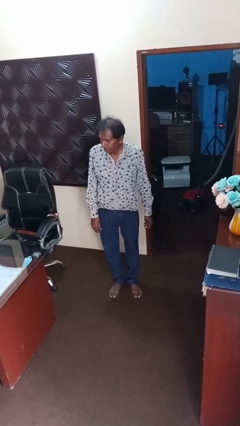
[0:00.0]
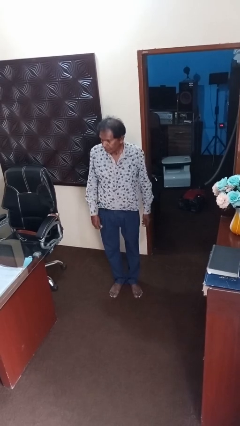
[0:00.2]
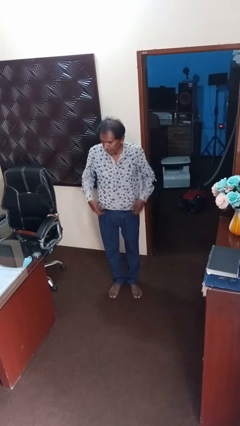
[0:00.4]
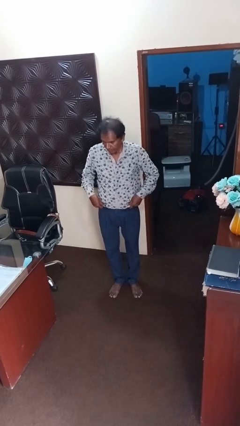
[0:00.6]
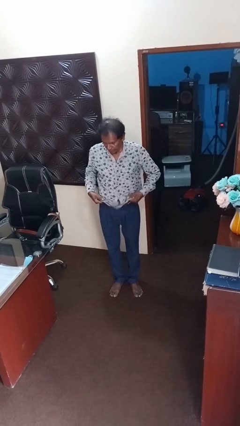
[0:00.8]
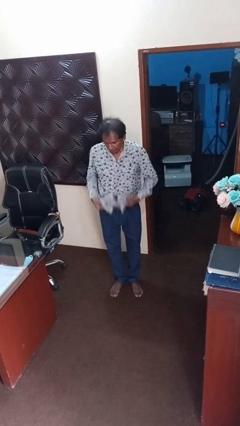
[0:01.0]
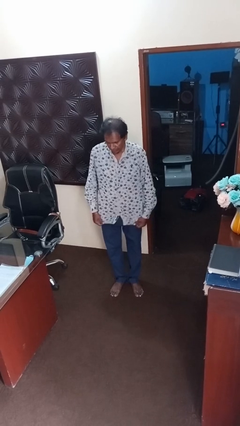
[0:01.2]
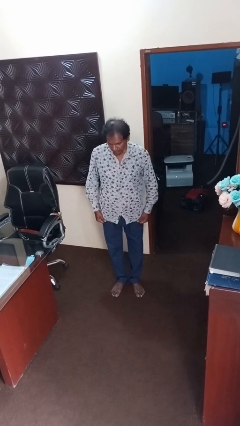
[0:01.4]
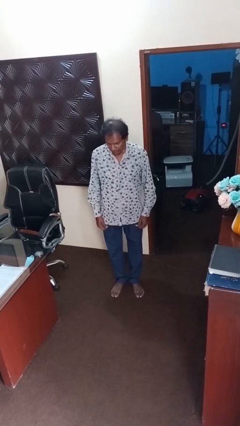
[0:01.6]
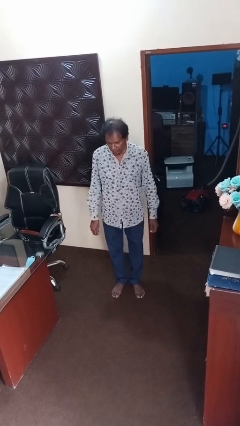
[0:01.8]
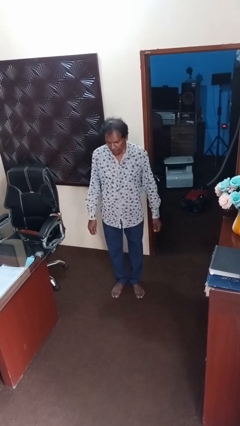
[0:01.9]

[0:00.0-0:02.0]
person untucks shirt

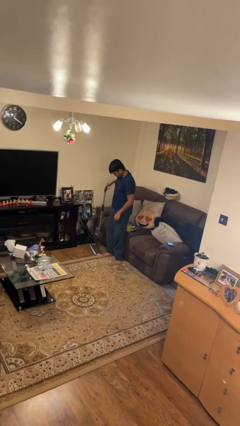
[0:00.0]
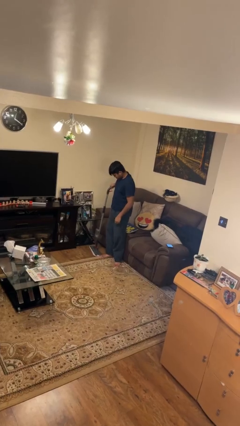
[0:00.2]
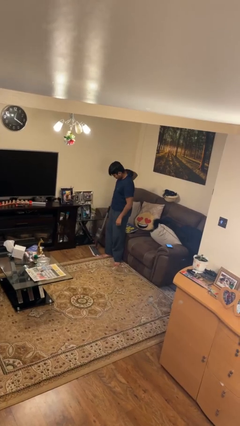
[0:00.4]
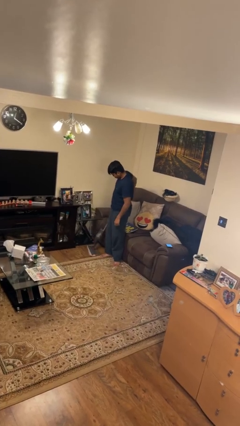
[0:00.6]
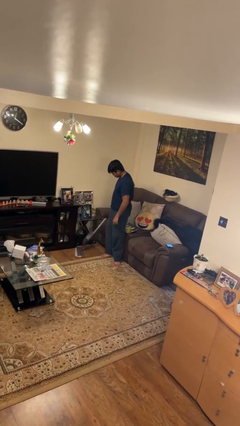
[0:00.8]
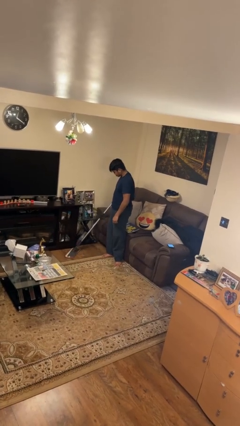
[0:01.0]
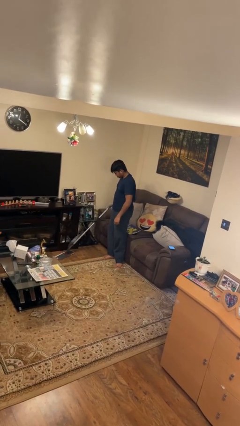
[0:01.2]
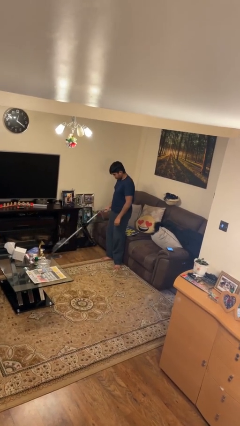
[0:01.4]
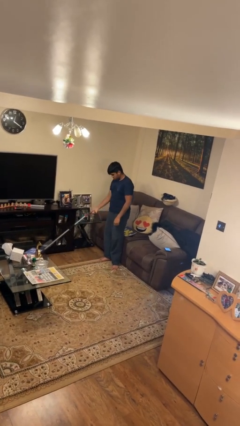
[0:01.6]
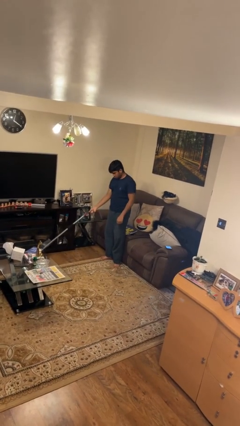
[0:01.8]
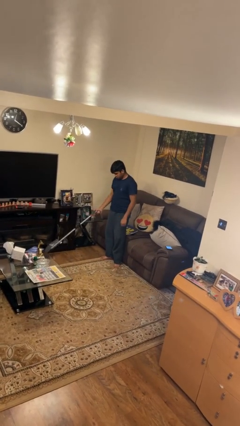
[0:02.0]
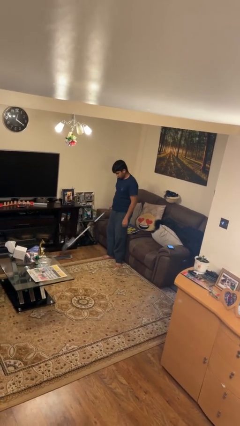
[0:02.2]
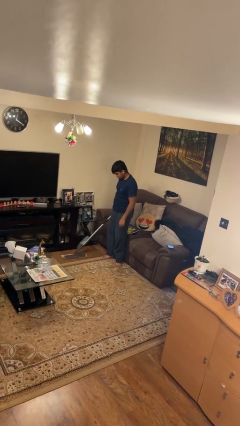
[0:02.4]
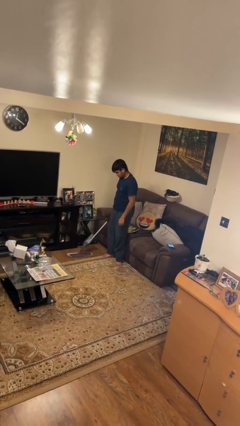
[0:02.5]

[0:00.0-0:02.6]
person mops

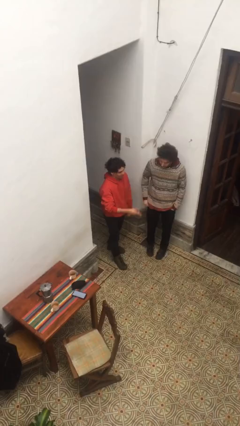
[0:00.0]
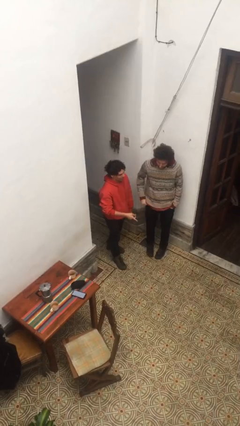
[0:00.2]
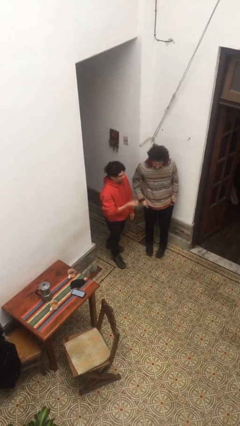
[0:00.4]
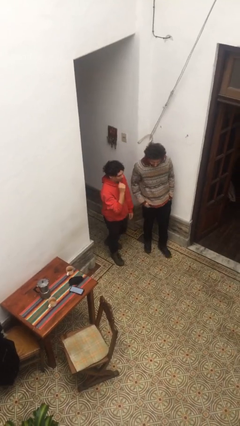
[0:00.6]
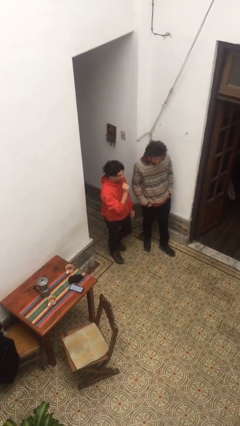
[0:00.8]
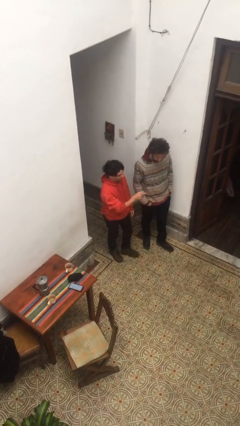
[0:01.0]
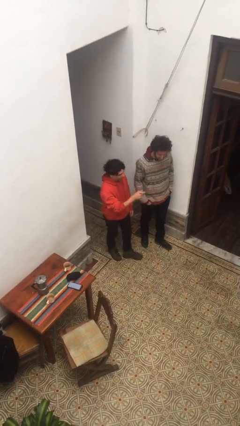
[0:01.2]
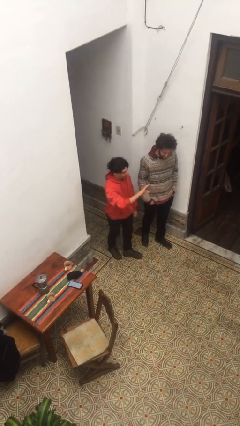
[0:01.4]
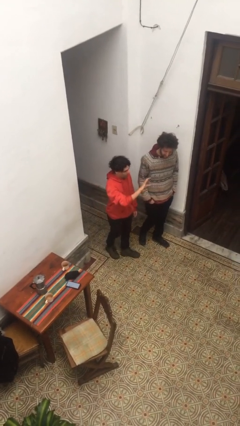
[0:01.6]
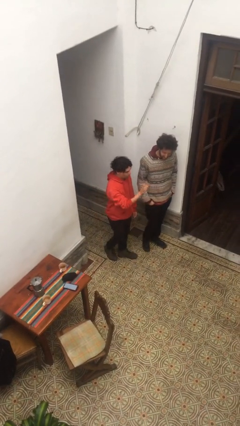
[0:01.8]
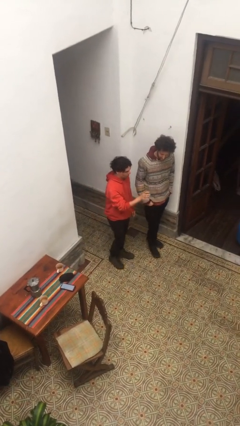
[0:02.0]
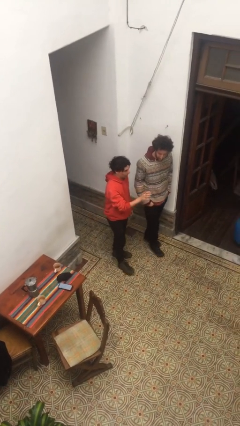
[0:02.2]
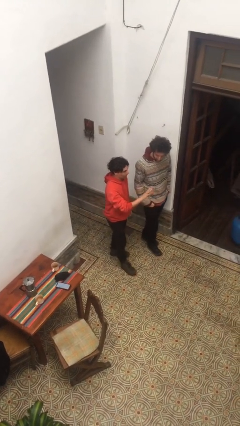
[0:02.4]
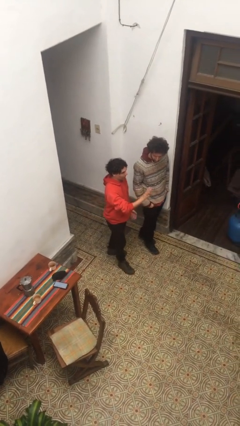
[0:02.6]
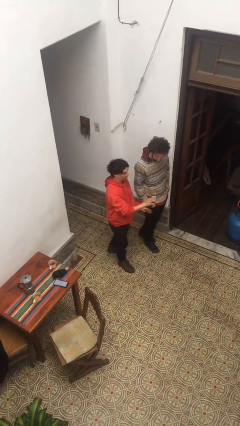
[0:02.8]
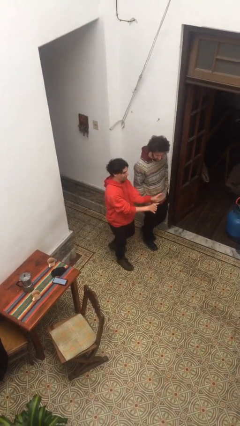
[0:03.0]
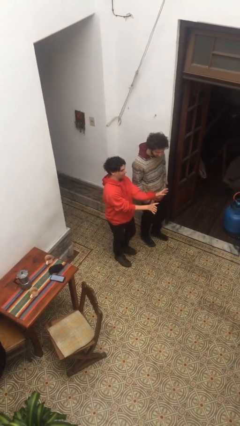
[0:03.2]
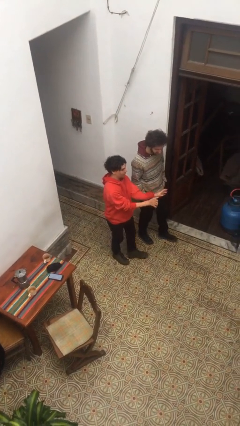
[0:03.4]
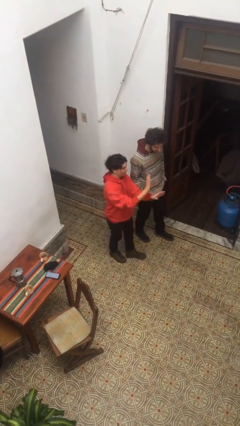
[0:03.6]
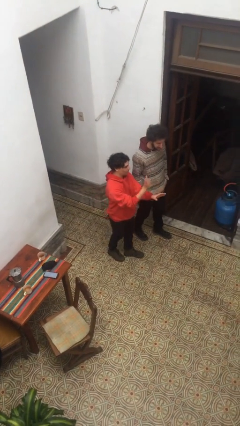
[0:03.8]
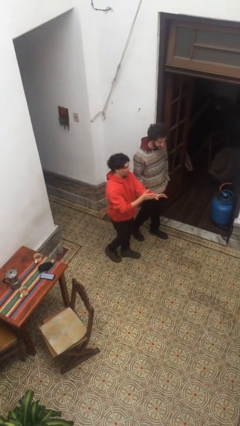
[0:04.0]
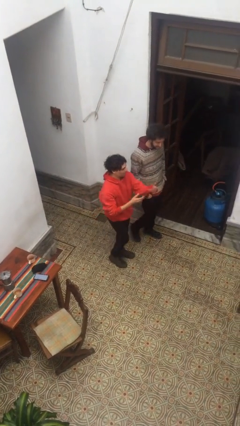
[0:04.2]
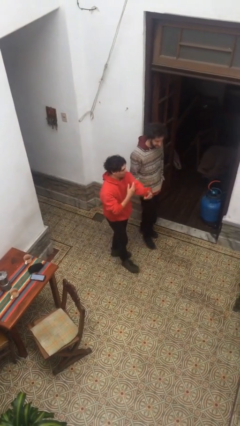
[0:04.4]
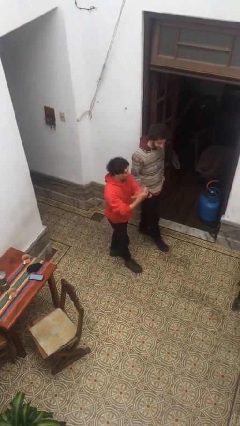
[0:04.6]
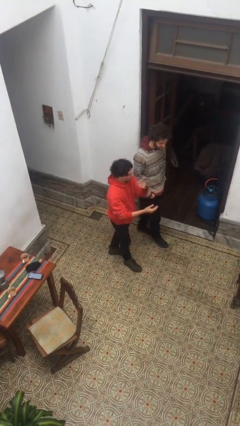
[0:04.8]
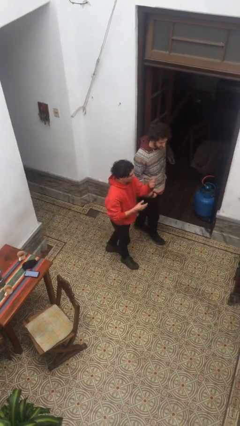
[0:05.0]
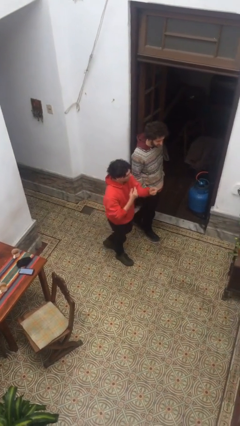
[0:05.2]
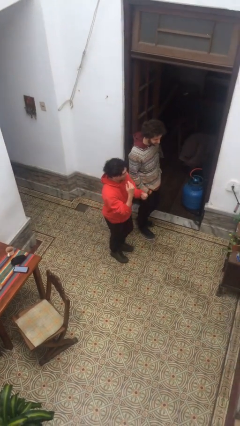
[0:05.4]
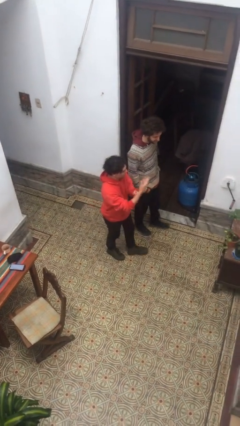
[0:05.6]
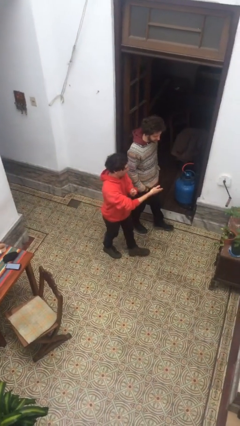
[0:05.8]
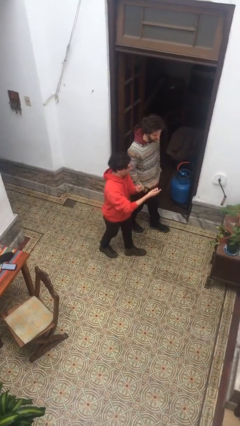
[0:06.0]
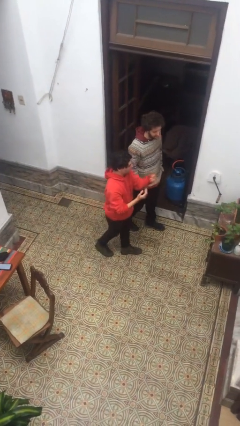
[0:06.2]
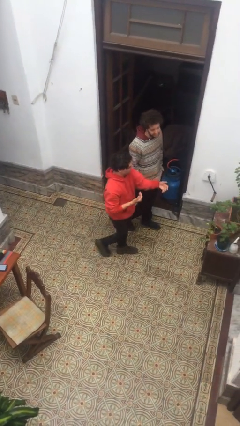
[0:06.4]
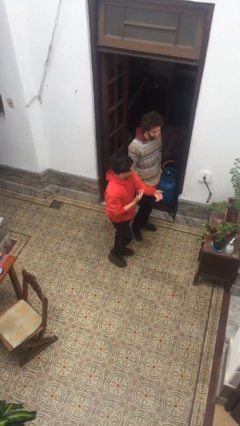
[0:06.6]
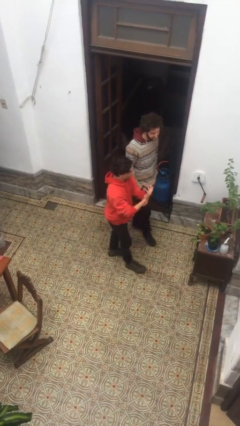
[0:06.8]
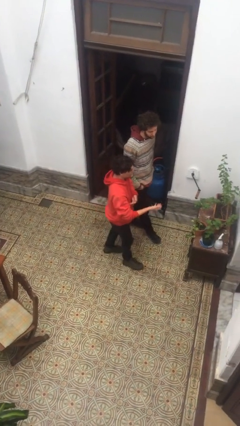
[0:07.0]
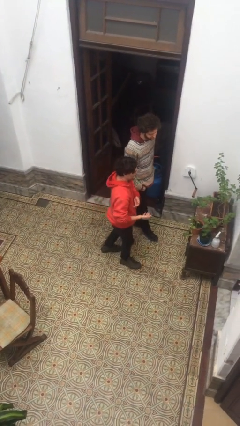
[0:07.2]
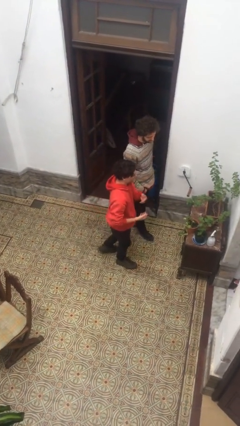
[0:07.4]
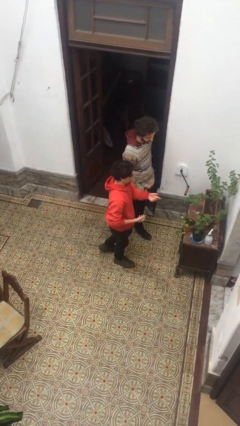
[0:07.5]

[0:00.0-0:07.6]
person talks to person

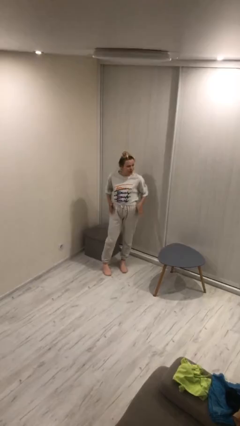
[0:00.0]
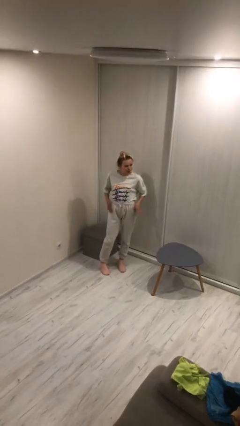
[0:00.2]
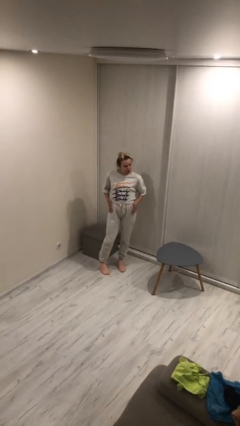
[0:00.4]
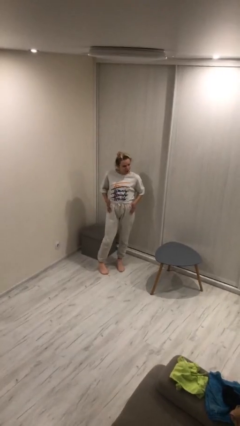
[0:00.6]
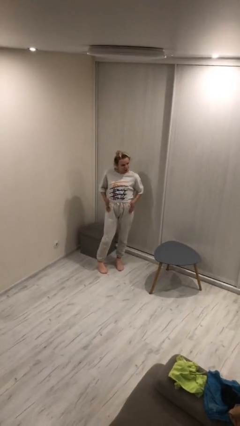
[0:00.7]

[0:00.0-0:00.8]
person slaps hands on thighs

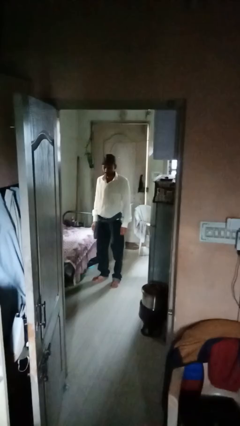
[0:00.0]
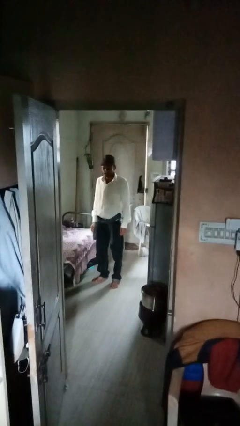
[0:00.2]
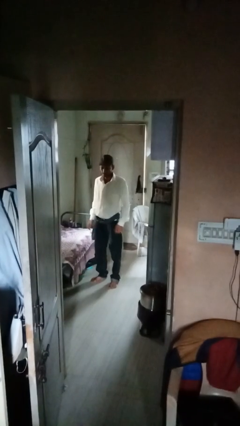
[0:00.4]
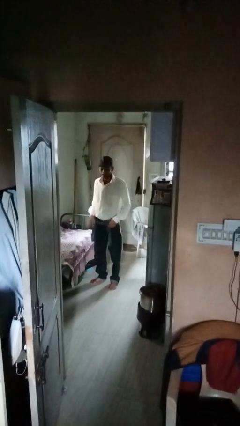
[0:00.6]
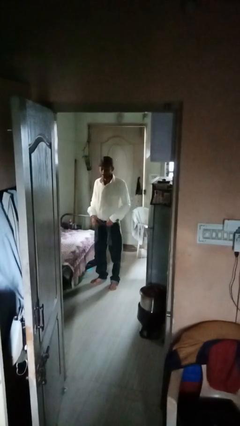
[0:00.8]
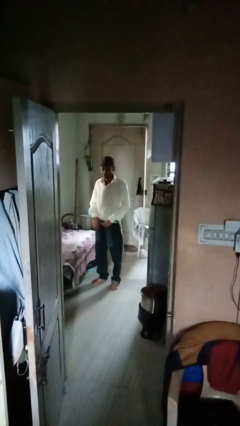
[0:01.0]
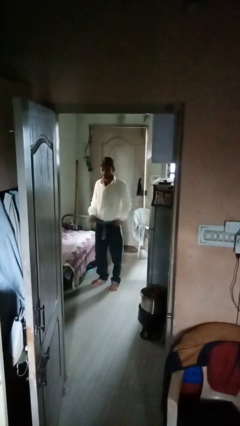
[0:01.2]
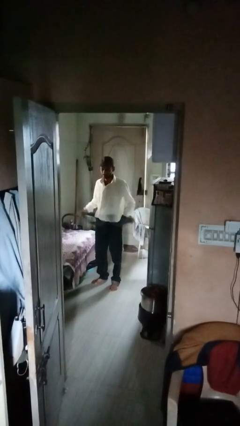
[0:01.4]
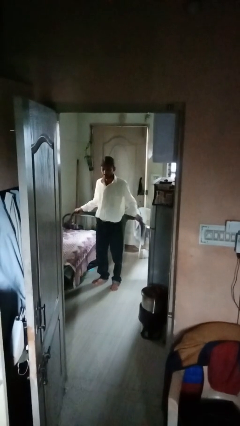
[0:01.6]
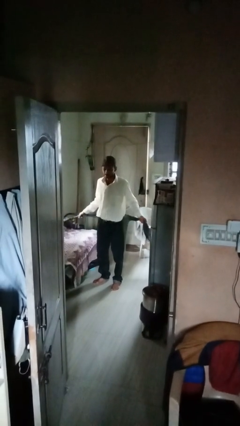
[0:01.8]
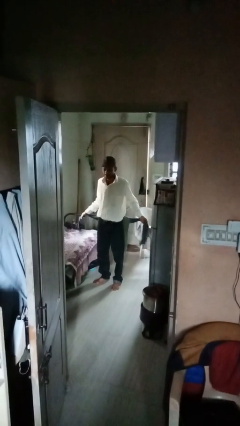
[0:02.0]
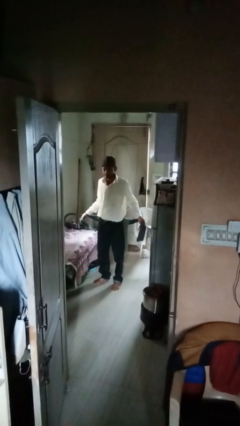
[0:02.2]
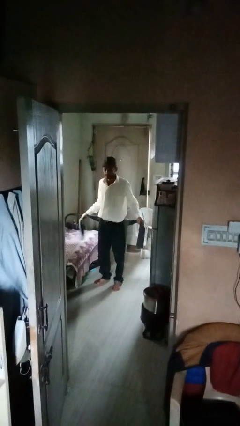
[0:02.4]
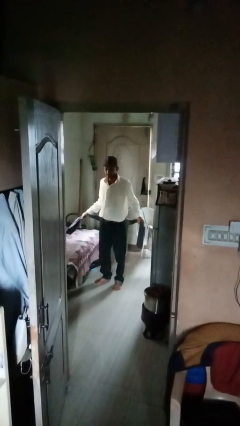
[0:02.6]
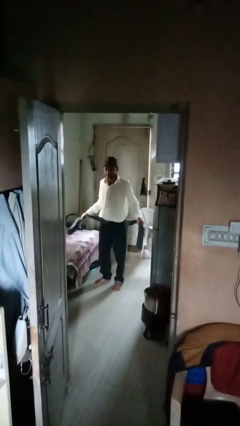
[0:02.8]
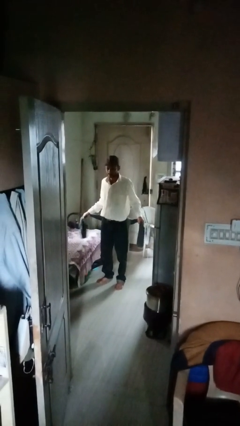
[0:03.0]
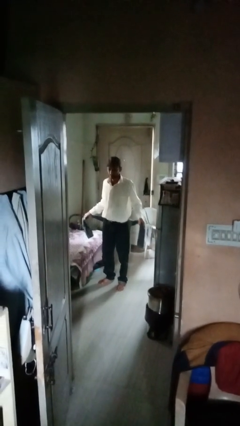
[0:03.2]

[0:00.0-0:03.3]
person unties jacket around waist

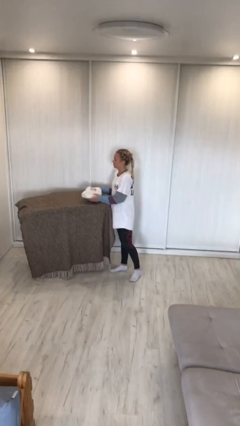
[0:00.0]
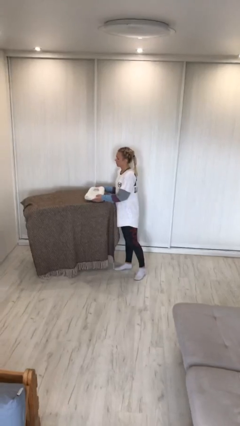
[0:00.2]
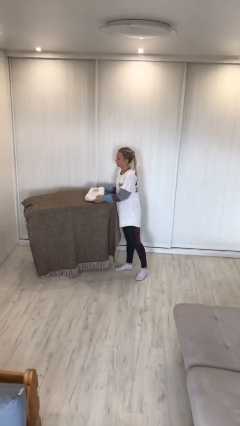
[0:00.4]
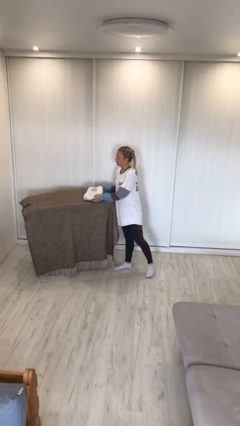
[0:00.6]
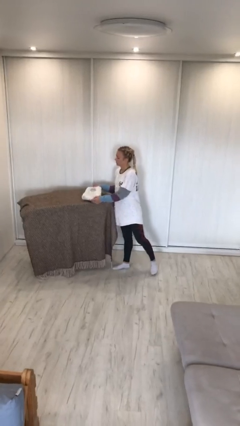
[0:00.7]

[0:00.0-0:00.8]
person puts down object on table

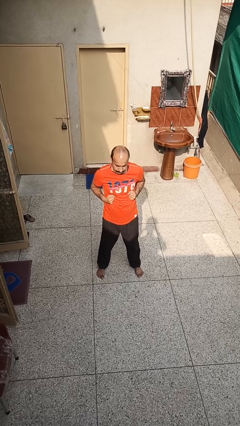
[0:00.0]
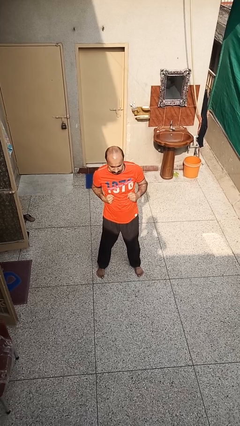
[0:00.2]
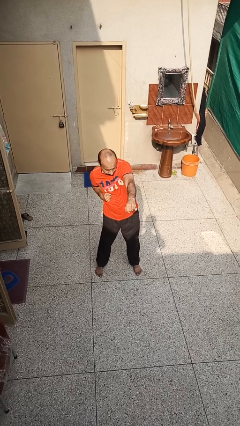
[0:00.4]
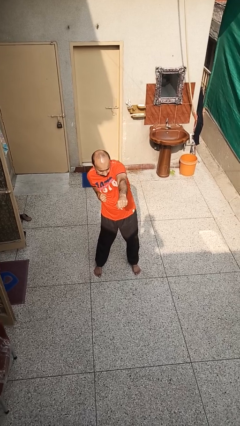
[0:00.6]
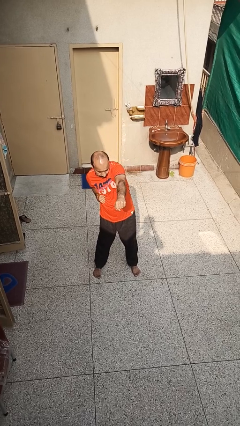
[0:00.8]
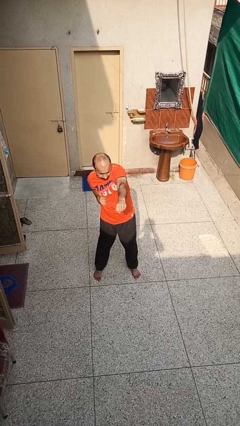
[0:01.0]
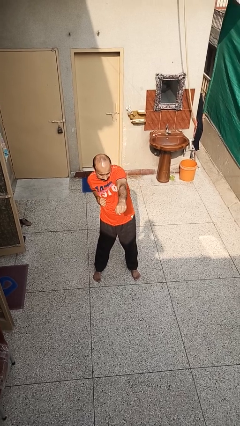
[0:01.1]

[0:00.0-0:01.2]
person punches
